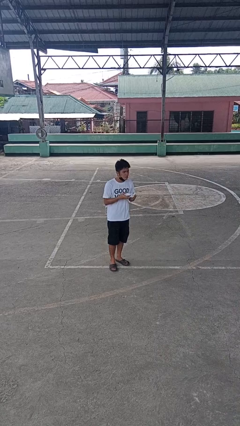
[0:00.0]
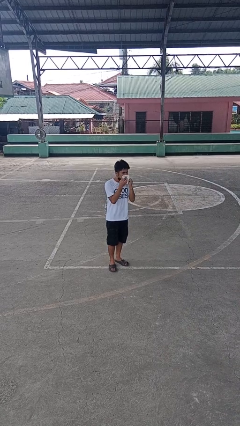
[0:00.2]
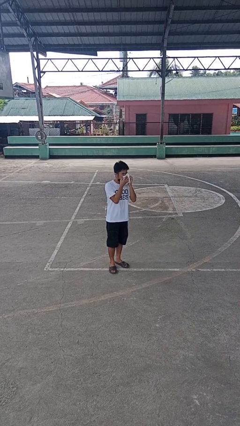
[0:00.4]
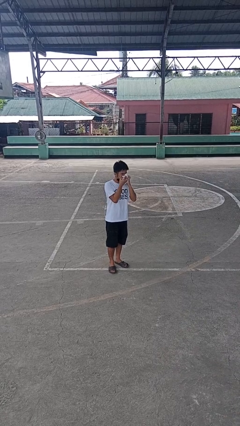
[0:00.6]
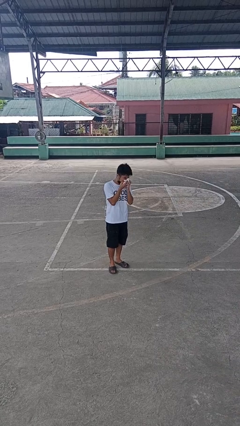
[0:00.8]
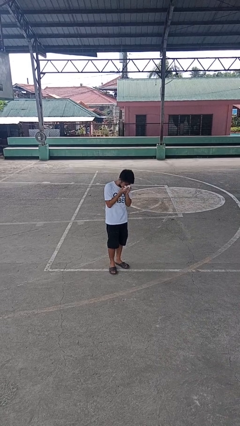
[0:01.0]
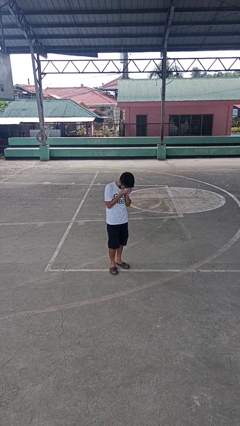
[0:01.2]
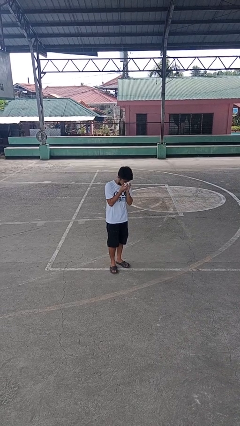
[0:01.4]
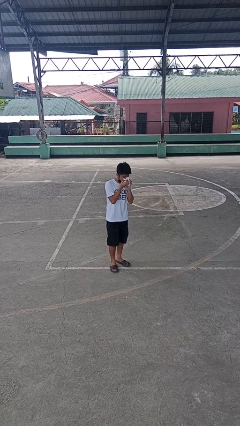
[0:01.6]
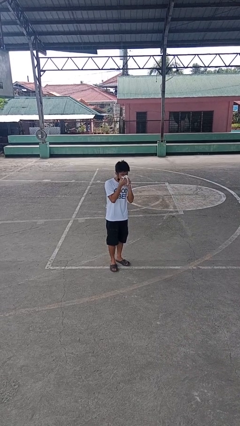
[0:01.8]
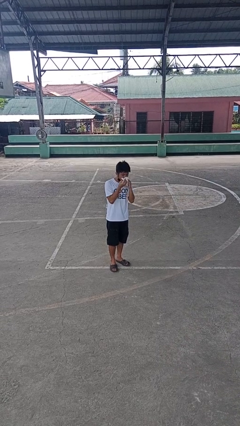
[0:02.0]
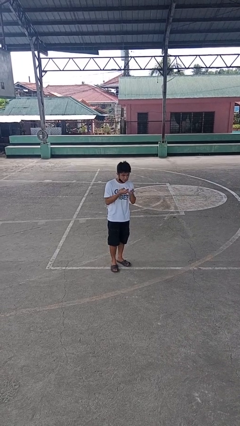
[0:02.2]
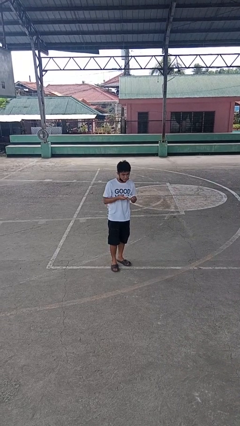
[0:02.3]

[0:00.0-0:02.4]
person blows nose

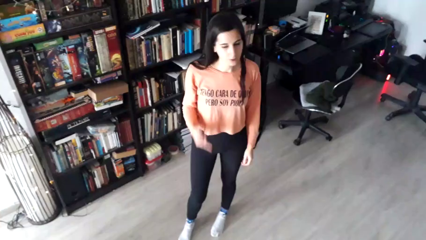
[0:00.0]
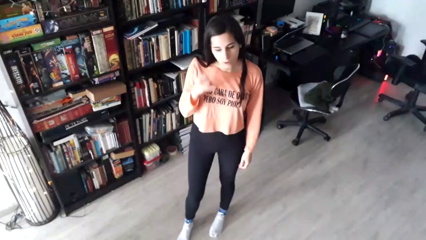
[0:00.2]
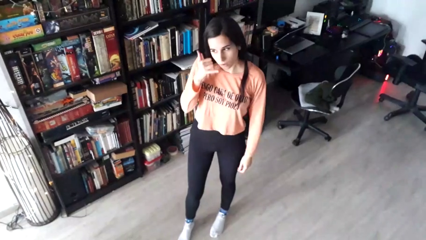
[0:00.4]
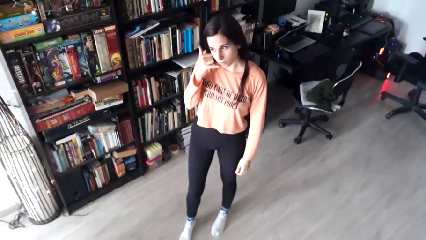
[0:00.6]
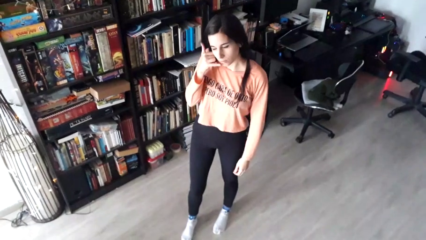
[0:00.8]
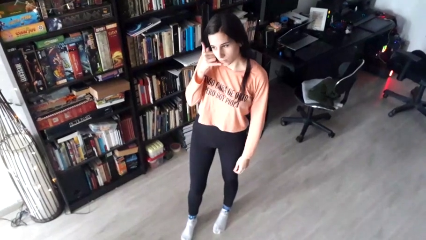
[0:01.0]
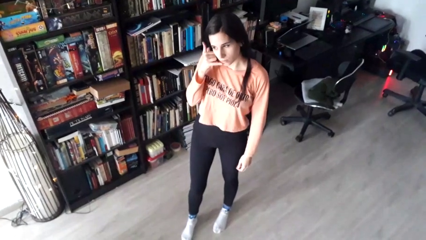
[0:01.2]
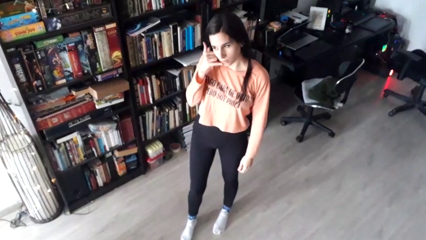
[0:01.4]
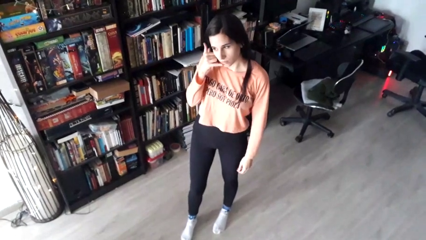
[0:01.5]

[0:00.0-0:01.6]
person gestures call me

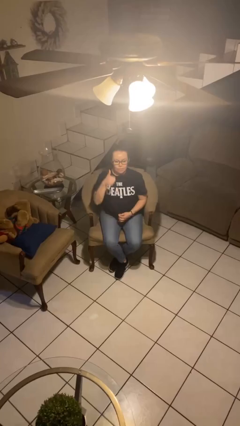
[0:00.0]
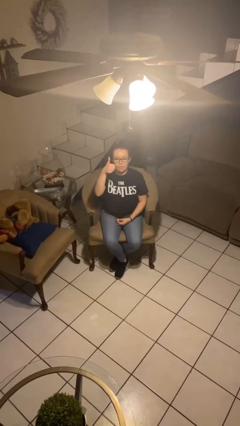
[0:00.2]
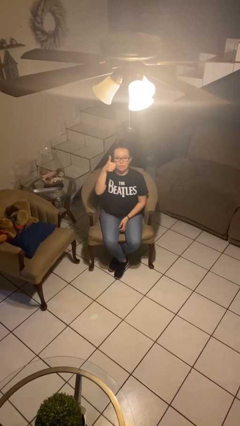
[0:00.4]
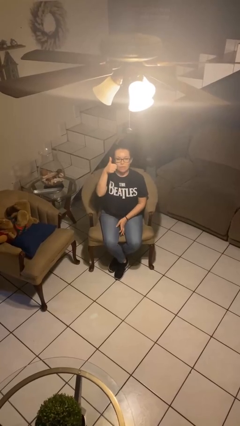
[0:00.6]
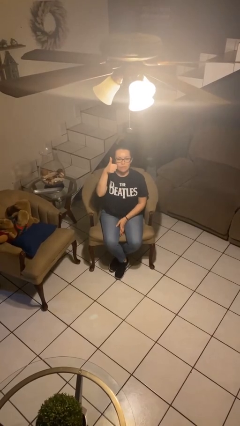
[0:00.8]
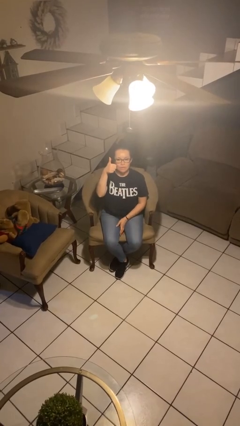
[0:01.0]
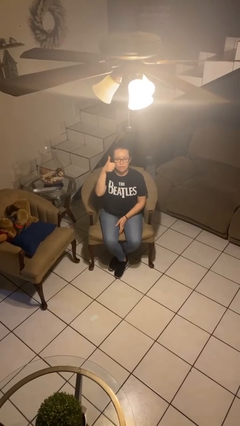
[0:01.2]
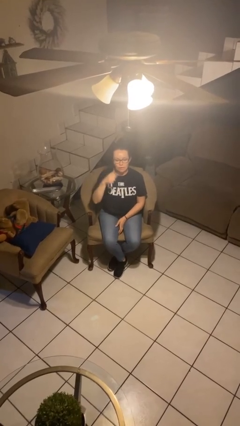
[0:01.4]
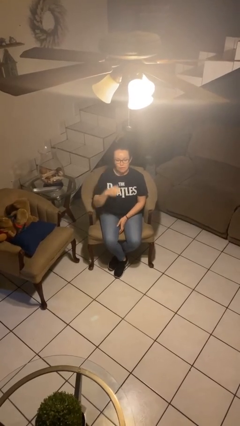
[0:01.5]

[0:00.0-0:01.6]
person gestures thumbs up

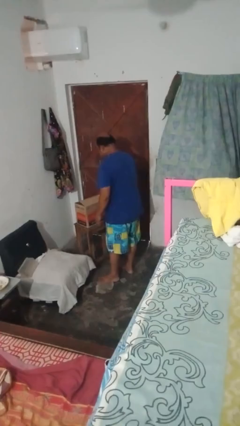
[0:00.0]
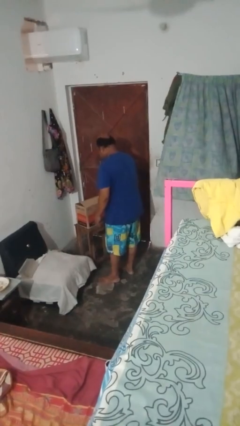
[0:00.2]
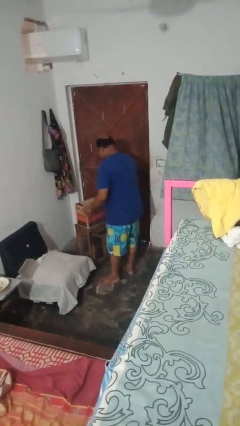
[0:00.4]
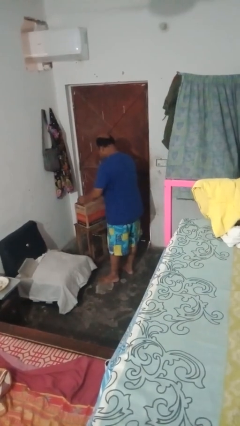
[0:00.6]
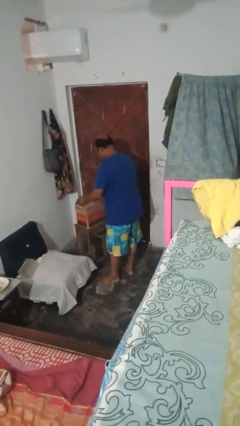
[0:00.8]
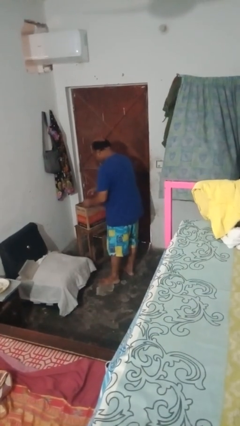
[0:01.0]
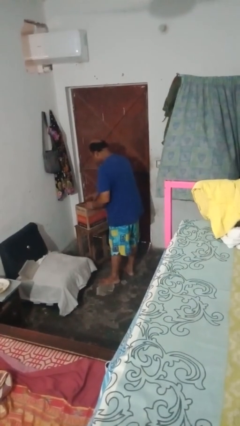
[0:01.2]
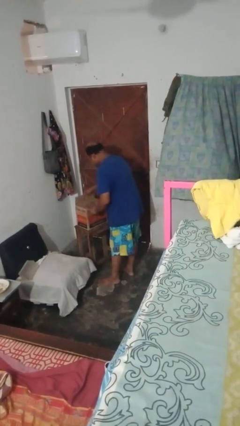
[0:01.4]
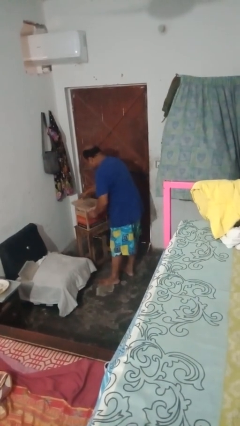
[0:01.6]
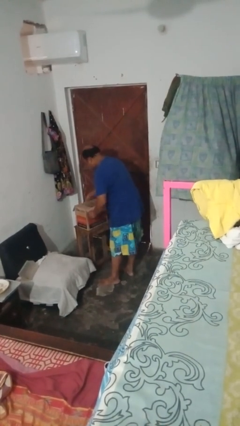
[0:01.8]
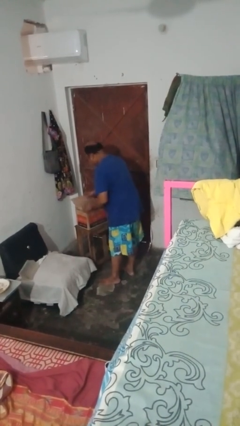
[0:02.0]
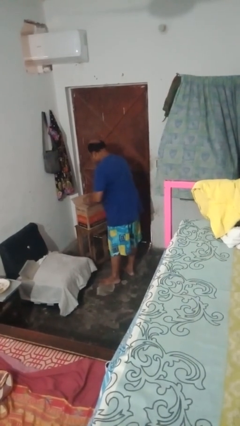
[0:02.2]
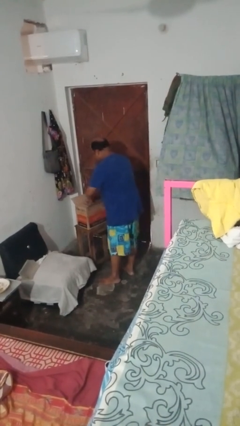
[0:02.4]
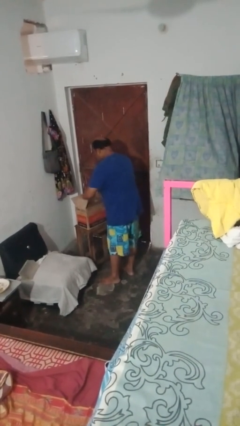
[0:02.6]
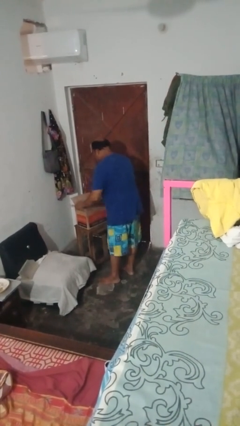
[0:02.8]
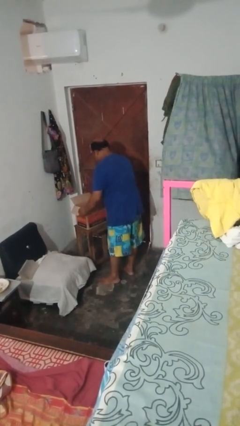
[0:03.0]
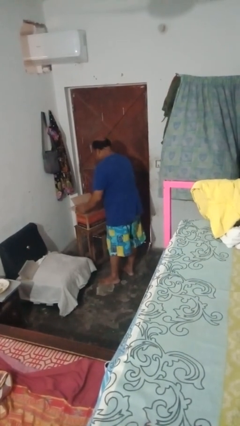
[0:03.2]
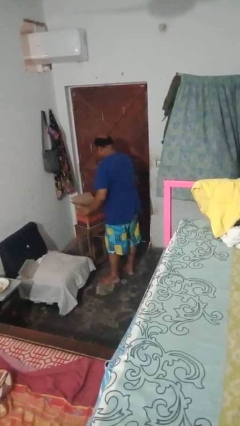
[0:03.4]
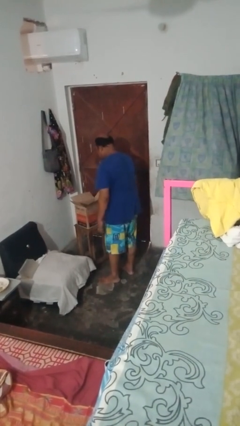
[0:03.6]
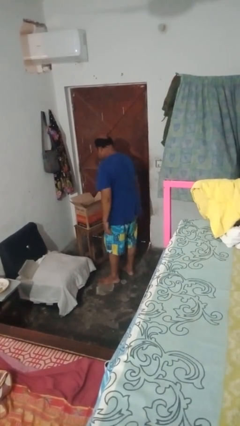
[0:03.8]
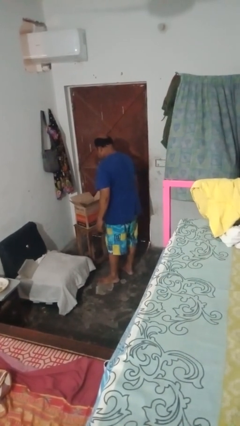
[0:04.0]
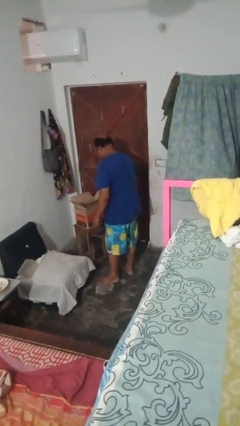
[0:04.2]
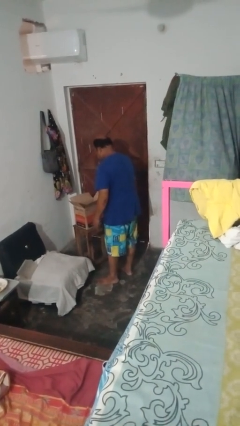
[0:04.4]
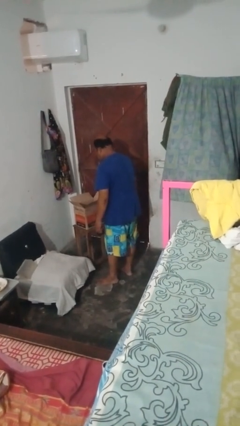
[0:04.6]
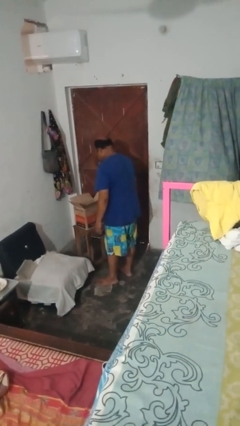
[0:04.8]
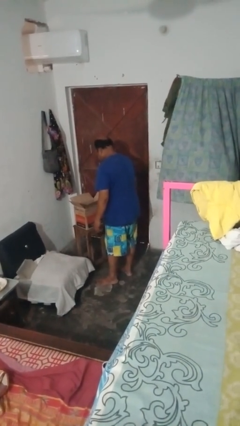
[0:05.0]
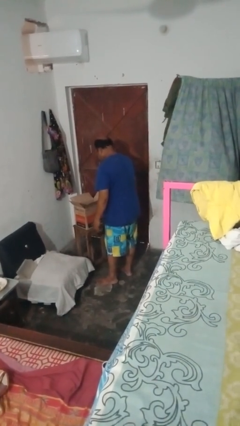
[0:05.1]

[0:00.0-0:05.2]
person opens box

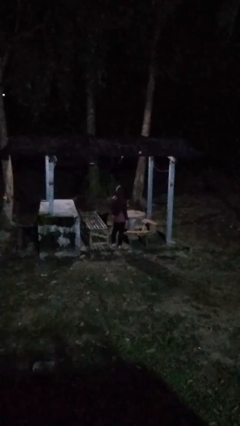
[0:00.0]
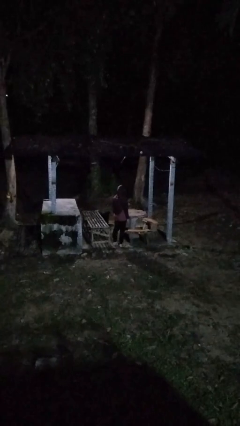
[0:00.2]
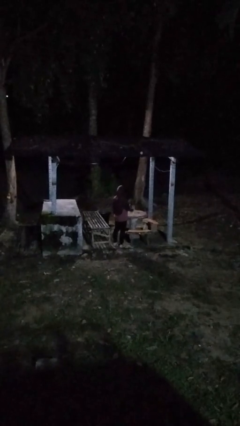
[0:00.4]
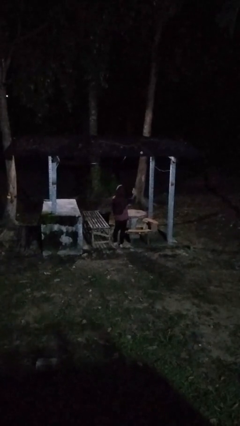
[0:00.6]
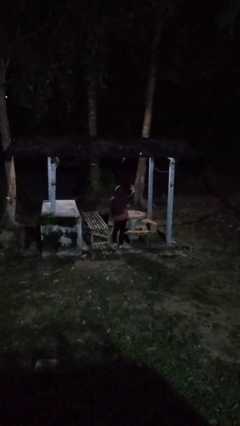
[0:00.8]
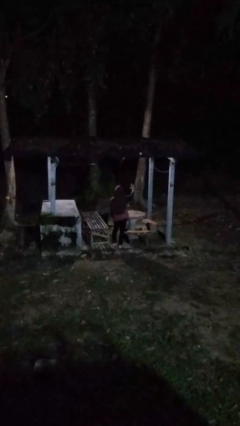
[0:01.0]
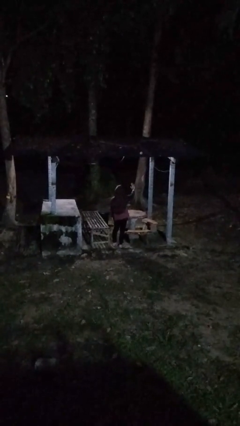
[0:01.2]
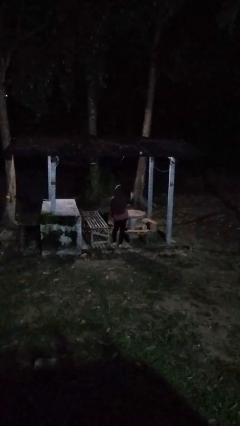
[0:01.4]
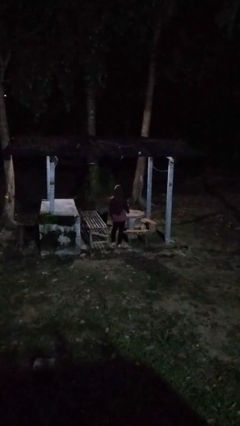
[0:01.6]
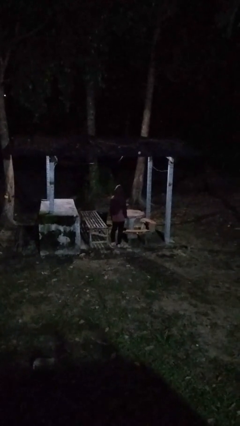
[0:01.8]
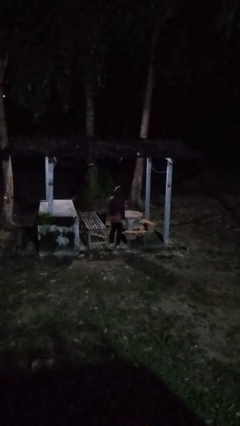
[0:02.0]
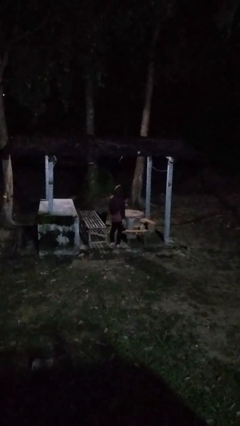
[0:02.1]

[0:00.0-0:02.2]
person gestures stop

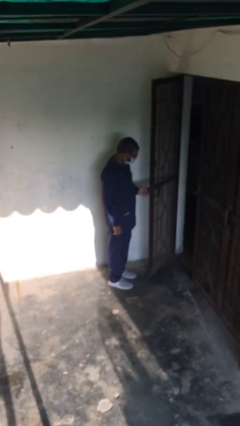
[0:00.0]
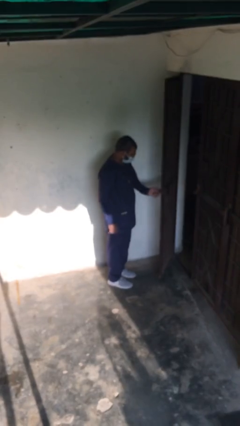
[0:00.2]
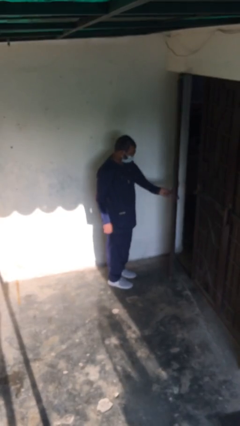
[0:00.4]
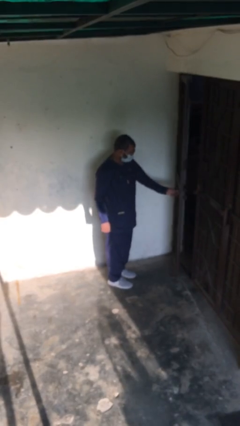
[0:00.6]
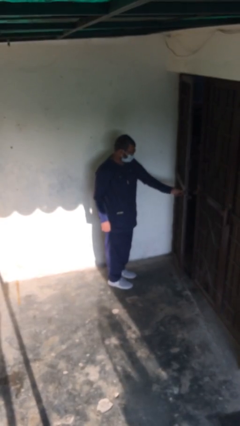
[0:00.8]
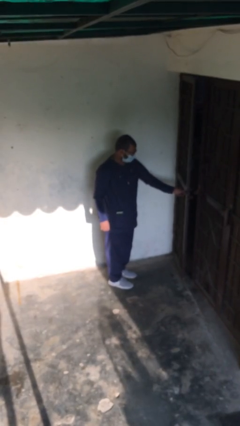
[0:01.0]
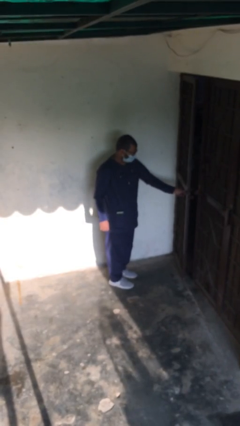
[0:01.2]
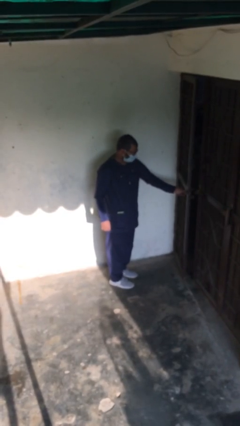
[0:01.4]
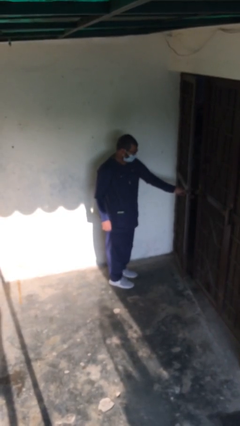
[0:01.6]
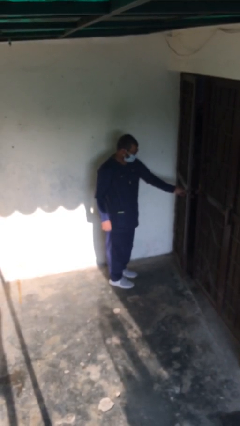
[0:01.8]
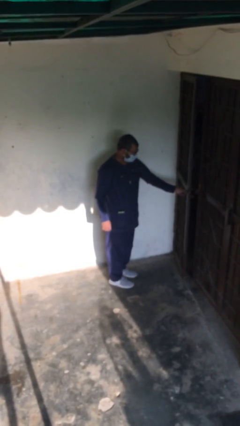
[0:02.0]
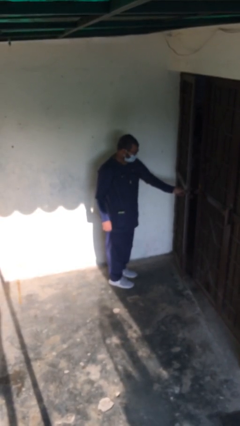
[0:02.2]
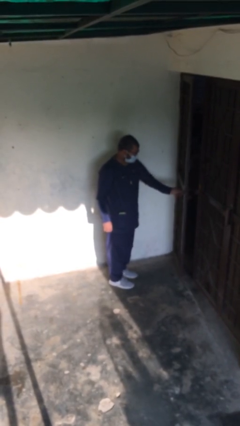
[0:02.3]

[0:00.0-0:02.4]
person closes facility door

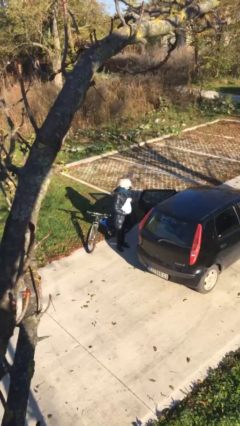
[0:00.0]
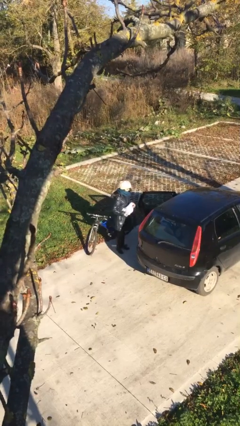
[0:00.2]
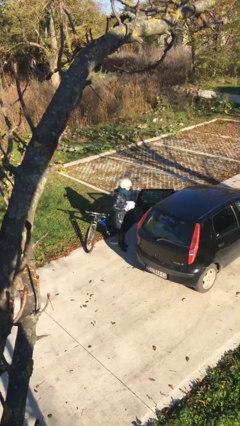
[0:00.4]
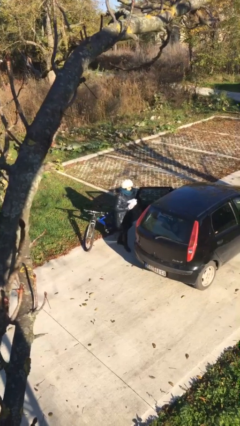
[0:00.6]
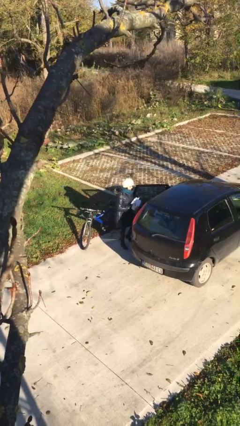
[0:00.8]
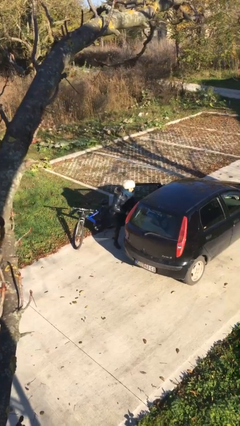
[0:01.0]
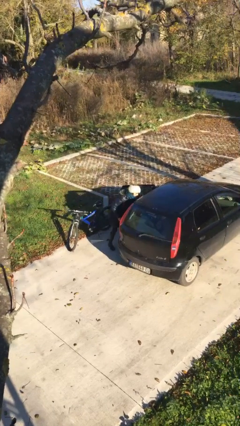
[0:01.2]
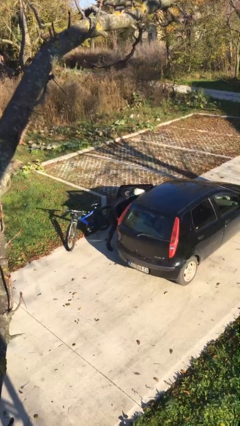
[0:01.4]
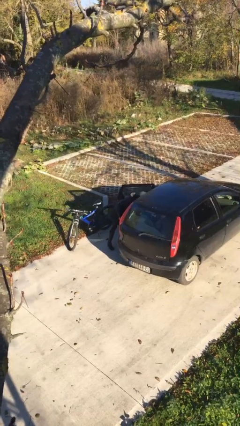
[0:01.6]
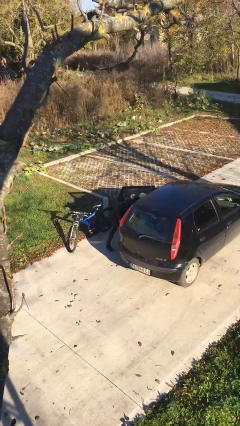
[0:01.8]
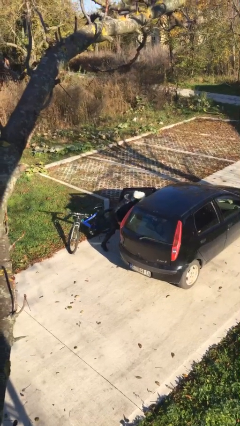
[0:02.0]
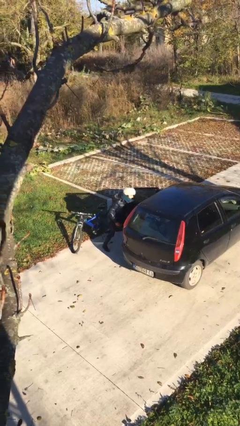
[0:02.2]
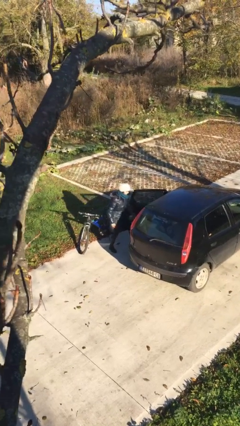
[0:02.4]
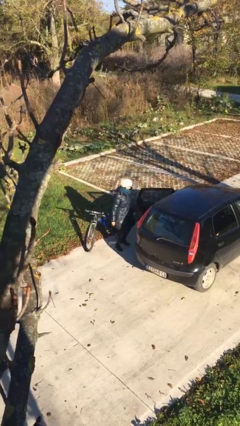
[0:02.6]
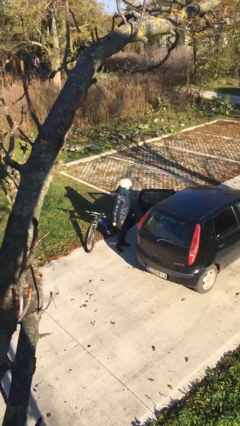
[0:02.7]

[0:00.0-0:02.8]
person loads car
